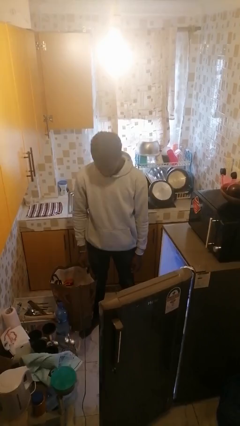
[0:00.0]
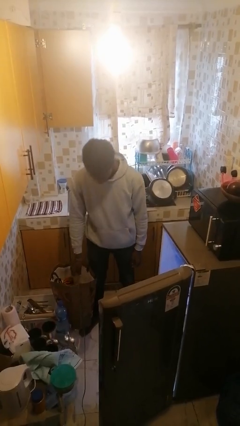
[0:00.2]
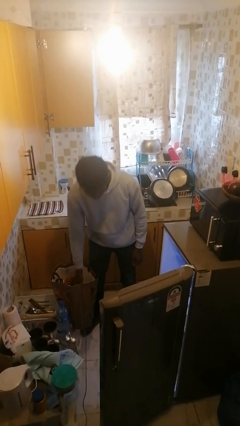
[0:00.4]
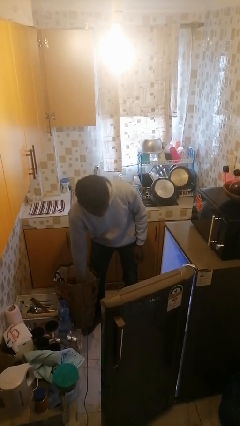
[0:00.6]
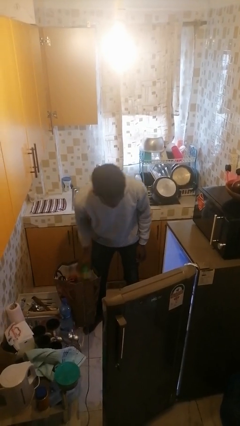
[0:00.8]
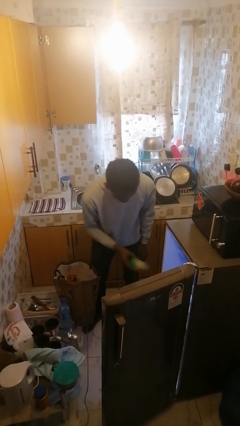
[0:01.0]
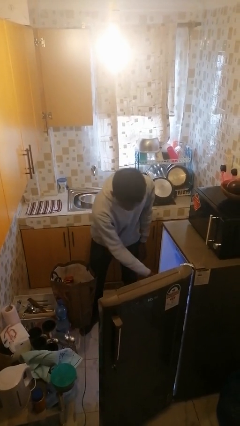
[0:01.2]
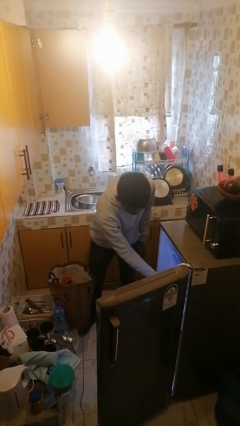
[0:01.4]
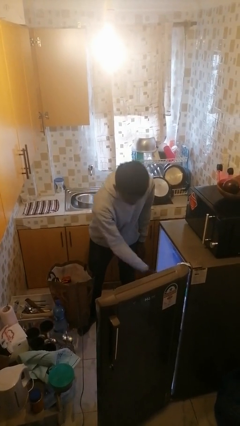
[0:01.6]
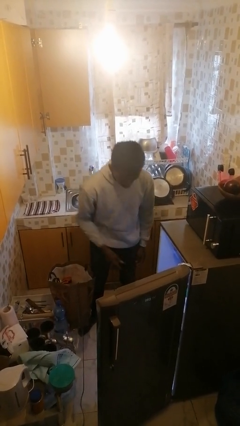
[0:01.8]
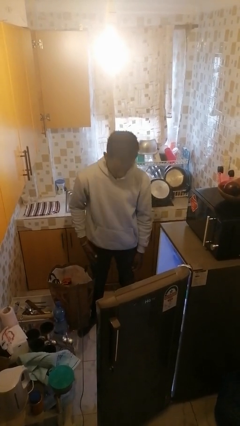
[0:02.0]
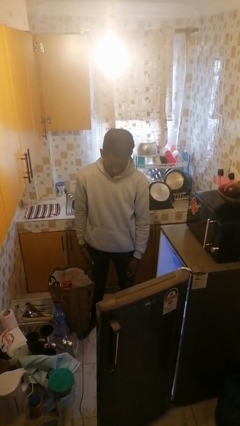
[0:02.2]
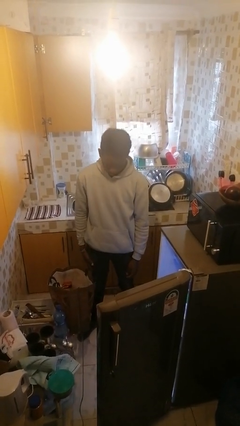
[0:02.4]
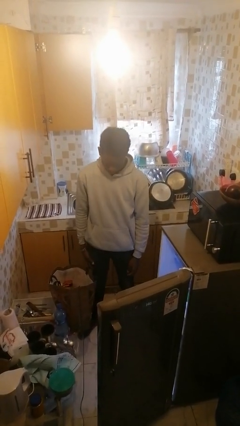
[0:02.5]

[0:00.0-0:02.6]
person loads groceries into refrigerator

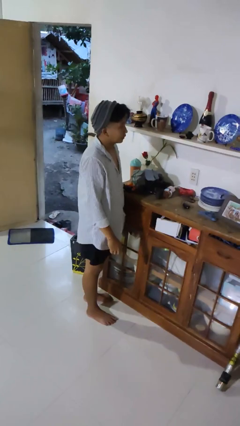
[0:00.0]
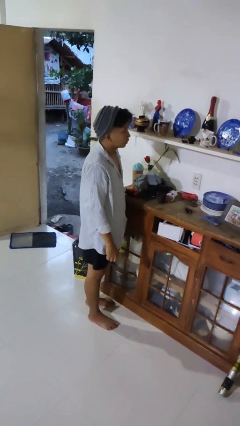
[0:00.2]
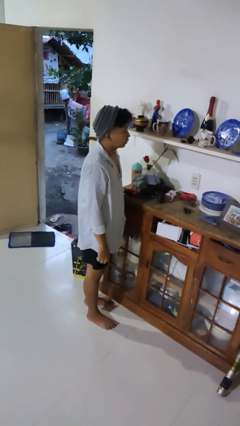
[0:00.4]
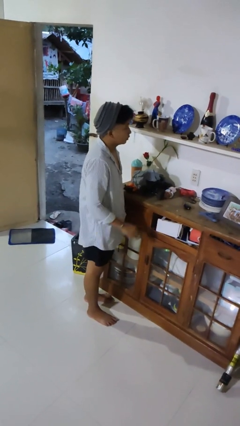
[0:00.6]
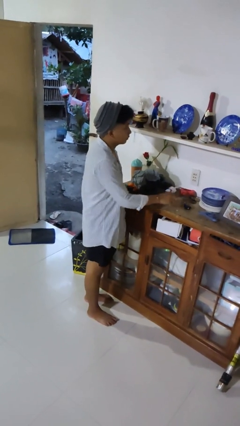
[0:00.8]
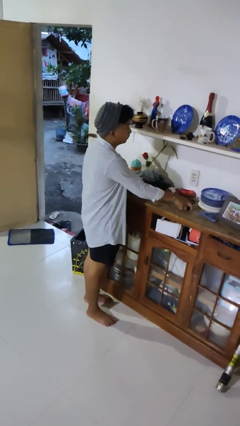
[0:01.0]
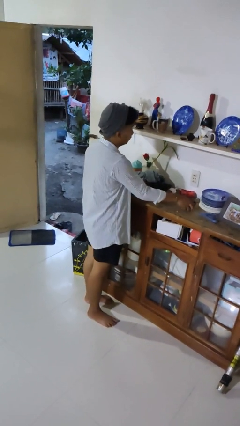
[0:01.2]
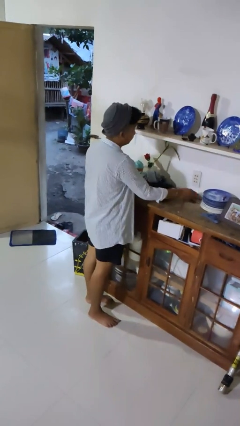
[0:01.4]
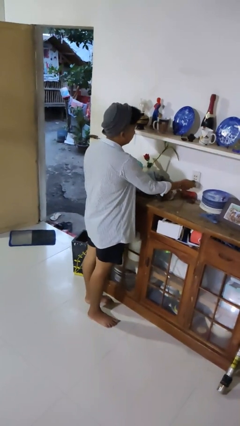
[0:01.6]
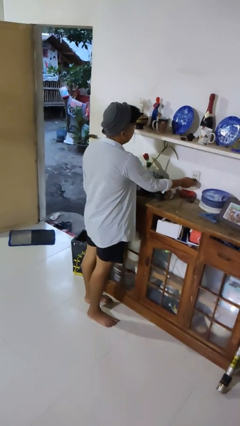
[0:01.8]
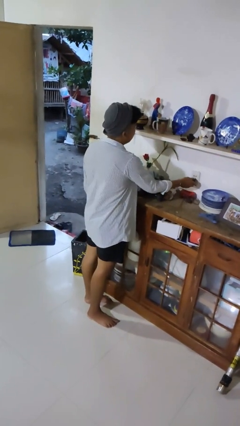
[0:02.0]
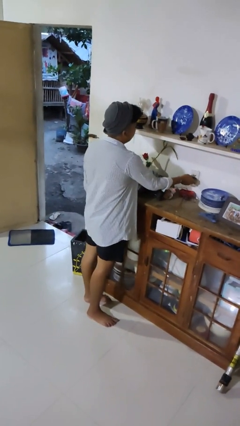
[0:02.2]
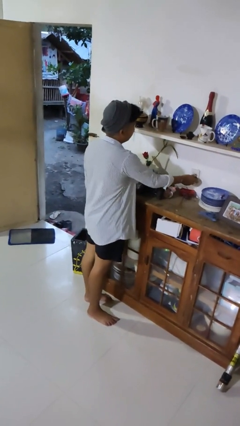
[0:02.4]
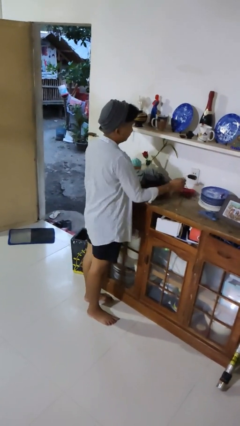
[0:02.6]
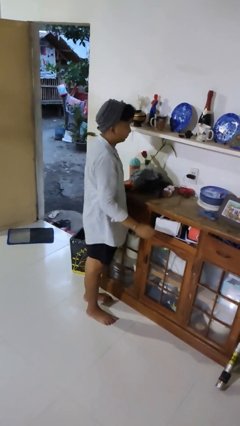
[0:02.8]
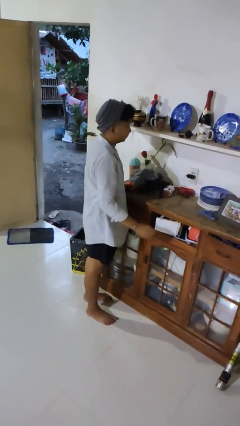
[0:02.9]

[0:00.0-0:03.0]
person plugs into electrical socket

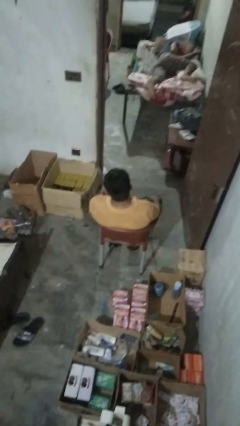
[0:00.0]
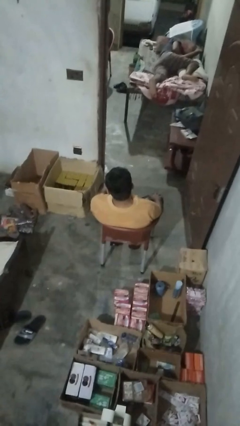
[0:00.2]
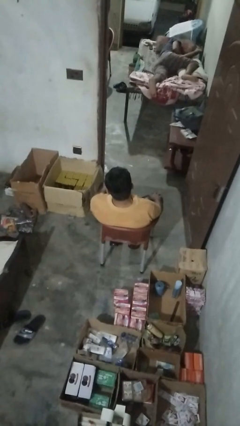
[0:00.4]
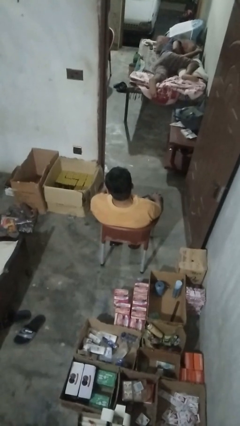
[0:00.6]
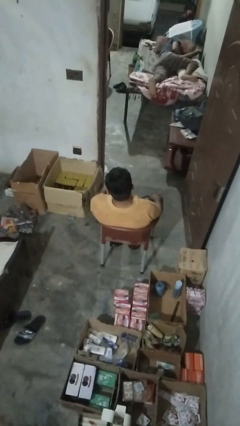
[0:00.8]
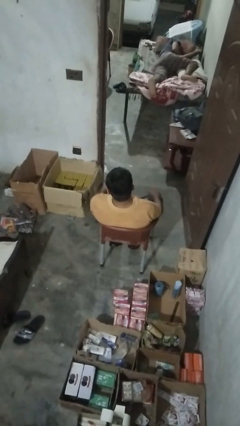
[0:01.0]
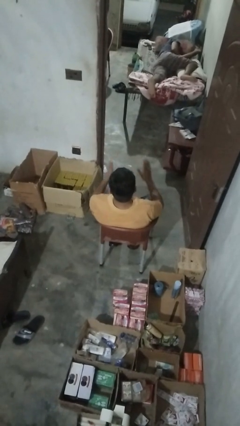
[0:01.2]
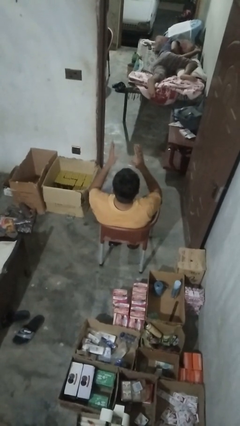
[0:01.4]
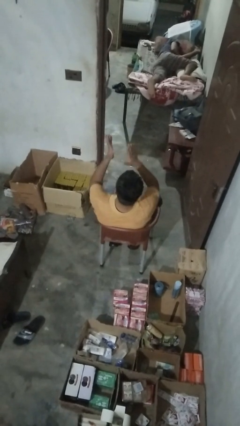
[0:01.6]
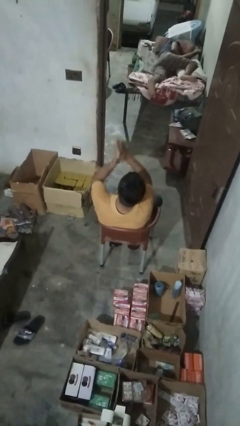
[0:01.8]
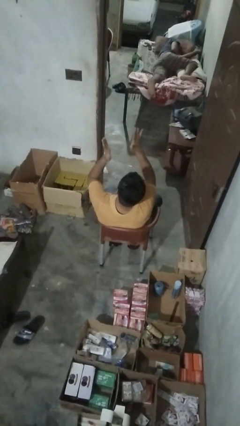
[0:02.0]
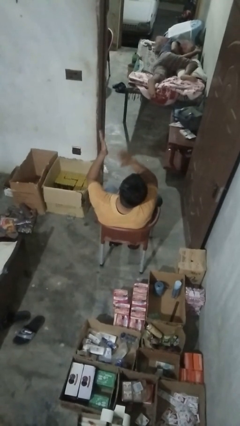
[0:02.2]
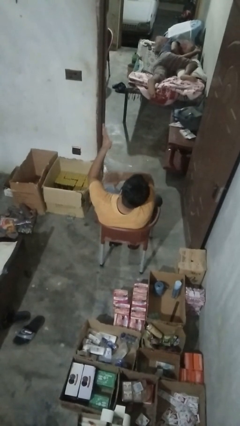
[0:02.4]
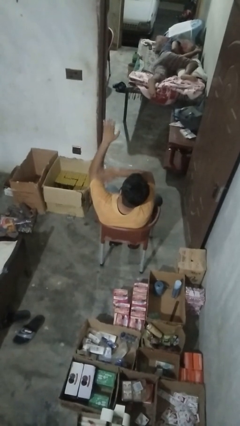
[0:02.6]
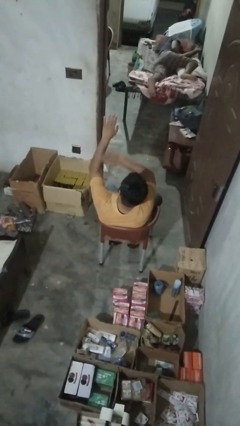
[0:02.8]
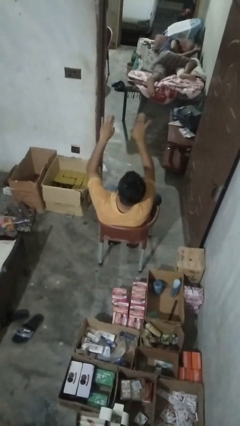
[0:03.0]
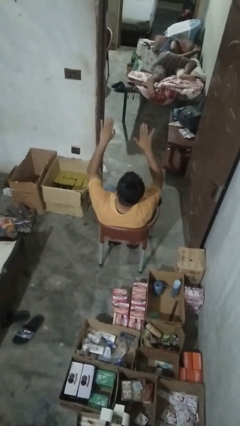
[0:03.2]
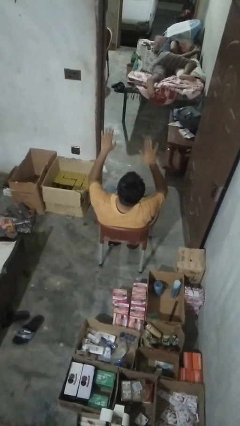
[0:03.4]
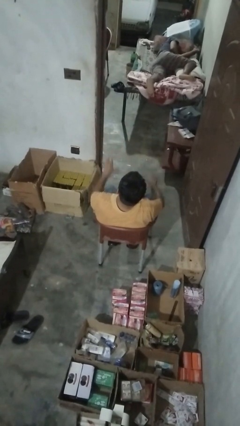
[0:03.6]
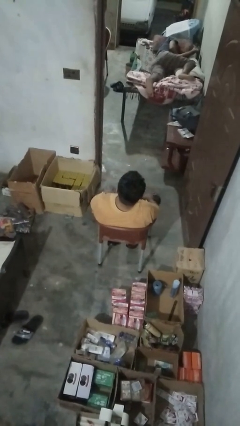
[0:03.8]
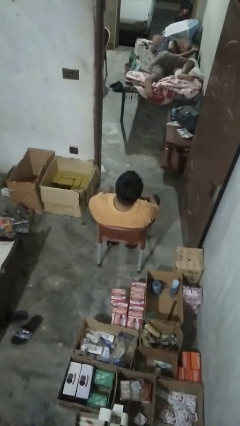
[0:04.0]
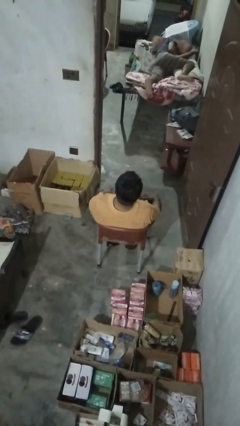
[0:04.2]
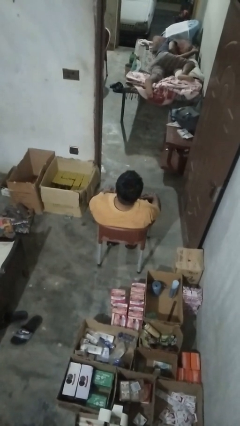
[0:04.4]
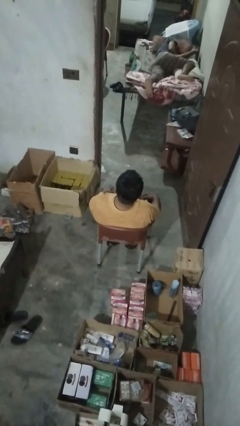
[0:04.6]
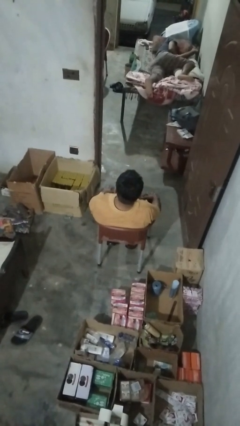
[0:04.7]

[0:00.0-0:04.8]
person swats bug

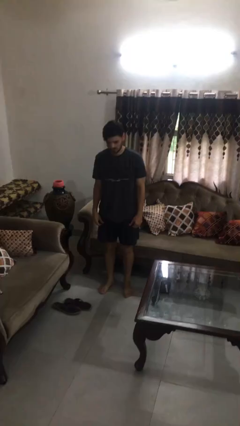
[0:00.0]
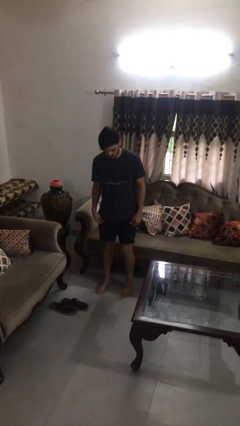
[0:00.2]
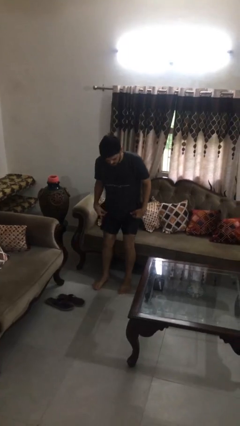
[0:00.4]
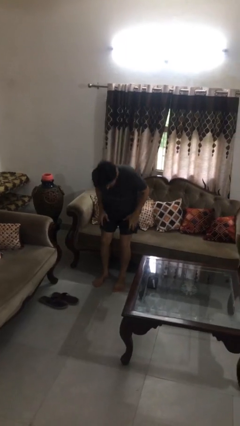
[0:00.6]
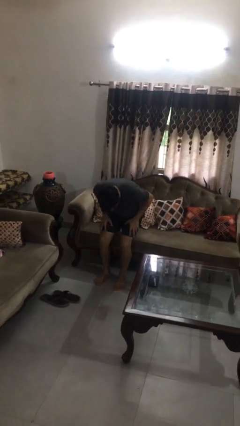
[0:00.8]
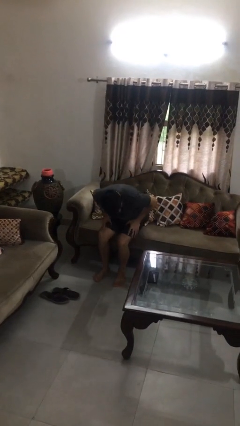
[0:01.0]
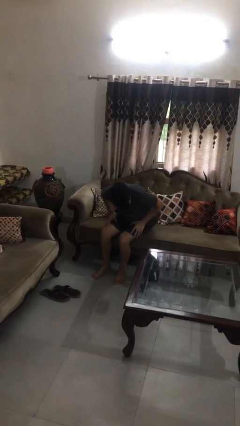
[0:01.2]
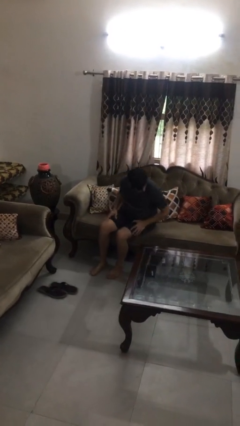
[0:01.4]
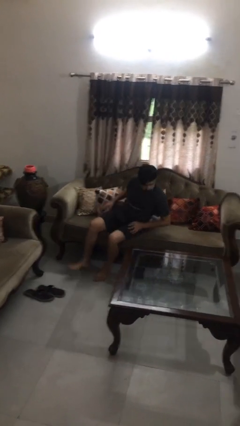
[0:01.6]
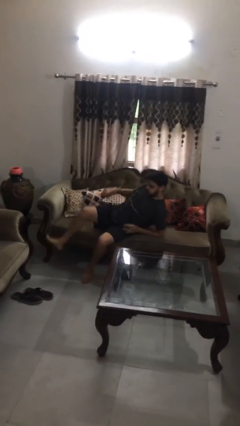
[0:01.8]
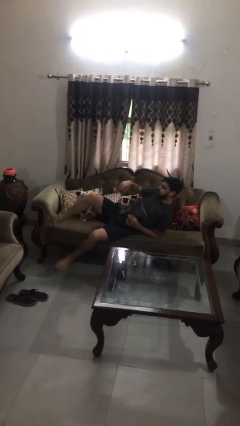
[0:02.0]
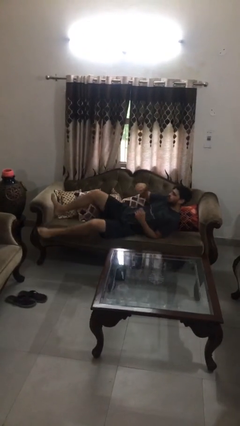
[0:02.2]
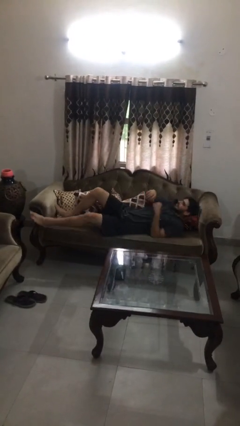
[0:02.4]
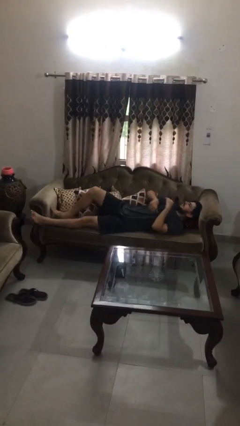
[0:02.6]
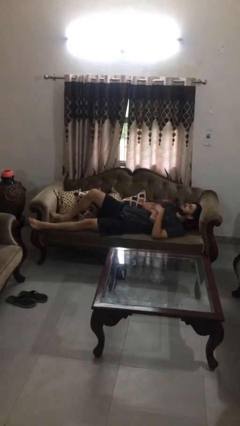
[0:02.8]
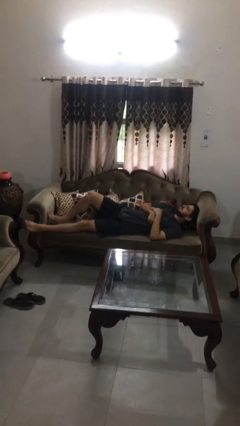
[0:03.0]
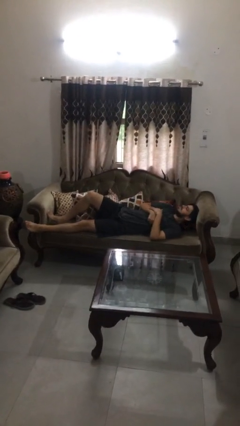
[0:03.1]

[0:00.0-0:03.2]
person lies down on couch

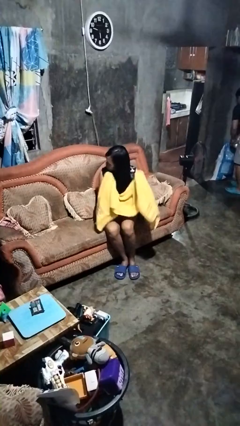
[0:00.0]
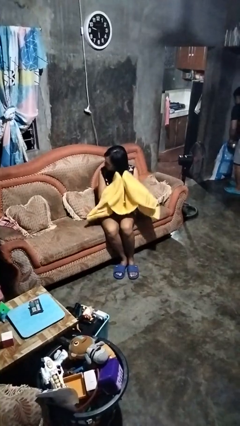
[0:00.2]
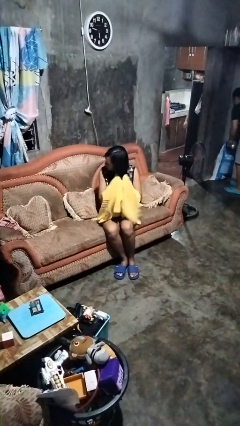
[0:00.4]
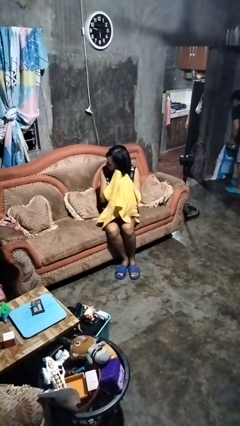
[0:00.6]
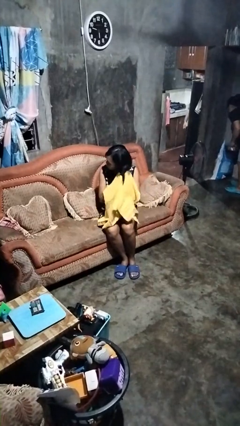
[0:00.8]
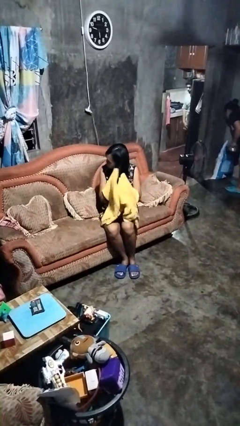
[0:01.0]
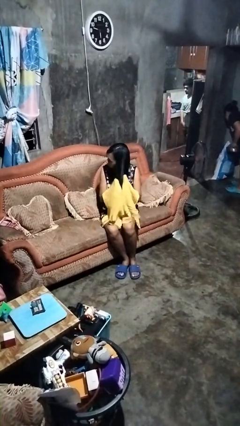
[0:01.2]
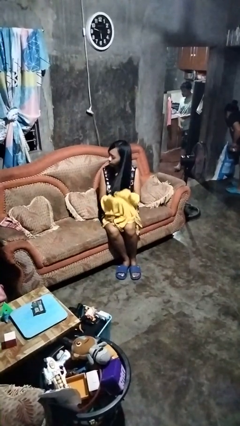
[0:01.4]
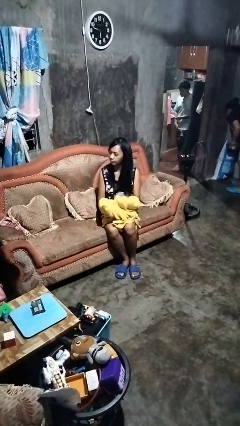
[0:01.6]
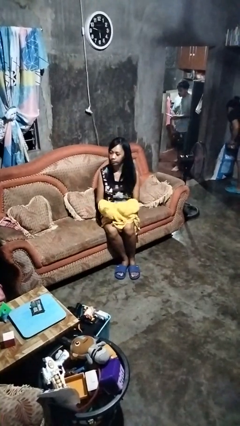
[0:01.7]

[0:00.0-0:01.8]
person dries hair with towel

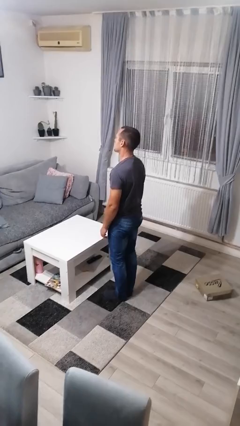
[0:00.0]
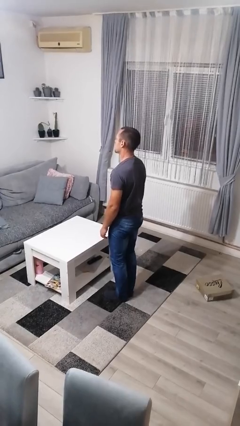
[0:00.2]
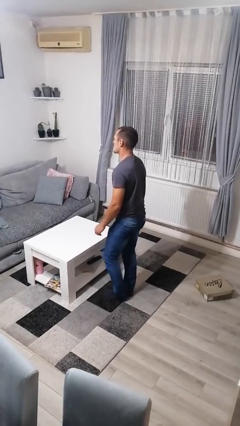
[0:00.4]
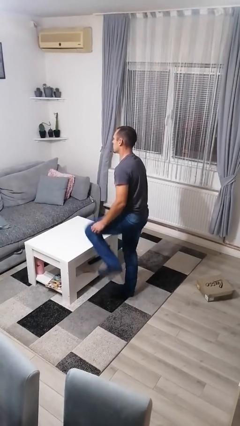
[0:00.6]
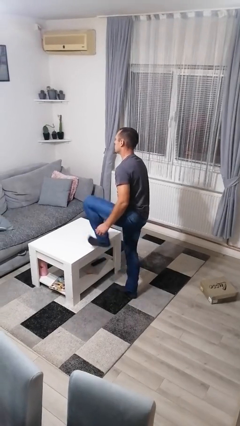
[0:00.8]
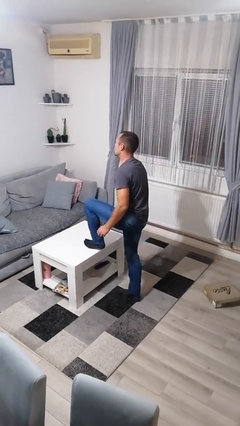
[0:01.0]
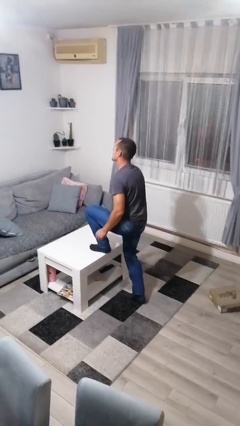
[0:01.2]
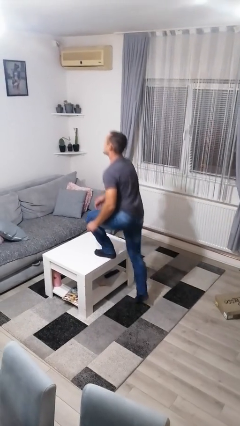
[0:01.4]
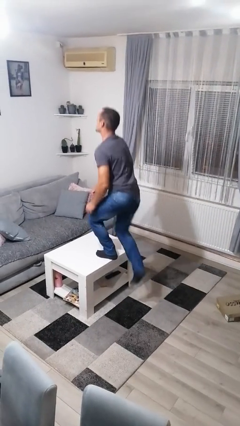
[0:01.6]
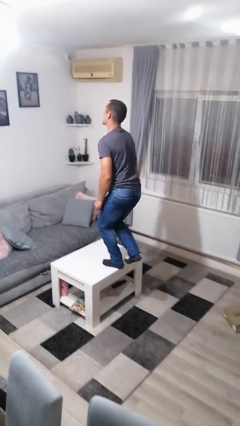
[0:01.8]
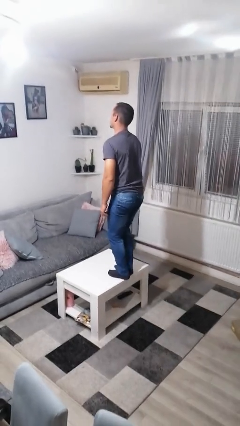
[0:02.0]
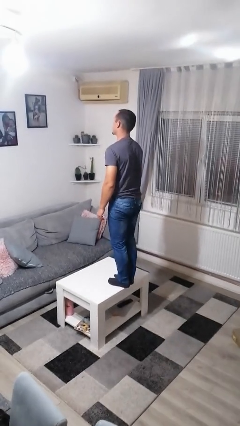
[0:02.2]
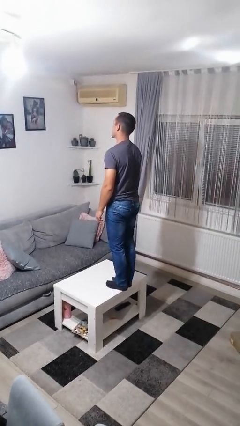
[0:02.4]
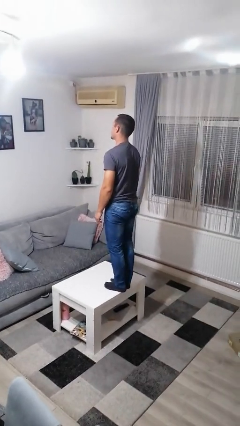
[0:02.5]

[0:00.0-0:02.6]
person climbs on table
